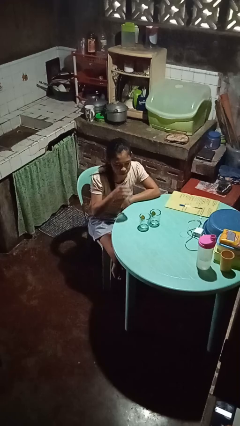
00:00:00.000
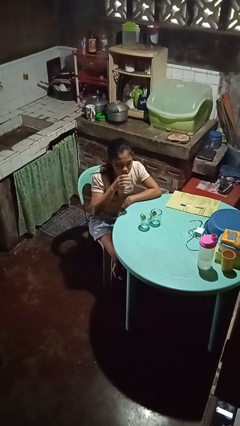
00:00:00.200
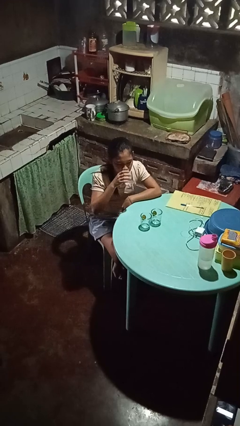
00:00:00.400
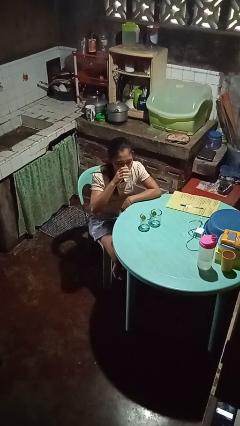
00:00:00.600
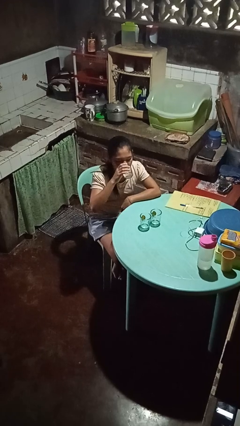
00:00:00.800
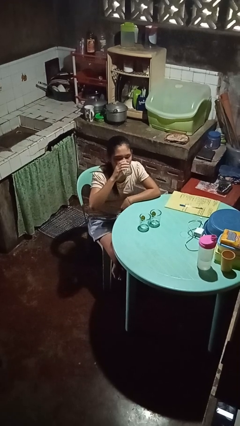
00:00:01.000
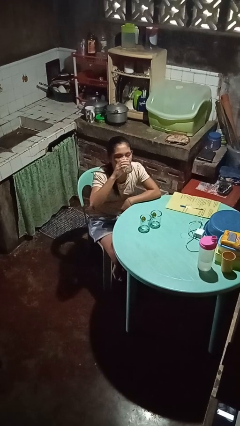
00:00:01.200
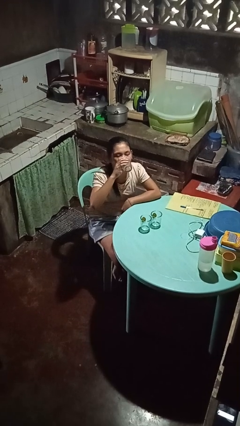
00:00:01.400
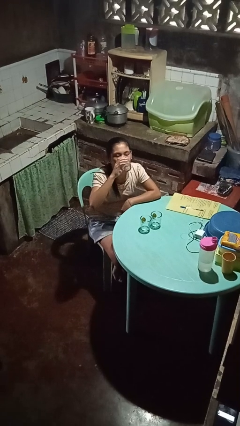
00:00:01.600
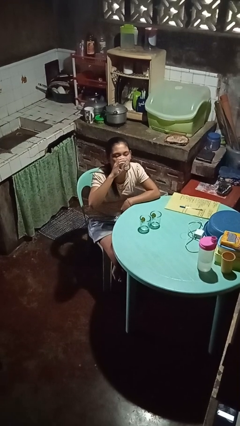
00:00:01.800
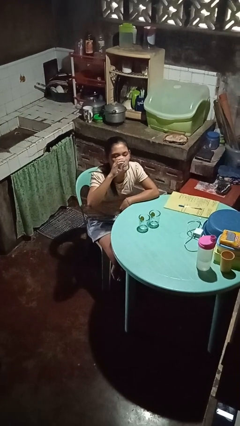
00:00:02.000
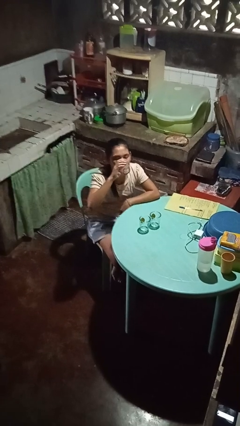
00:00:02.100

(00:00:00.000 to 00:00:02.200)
person drinks from shotglass

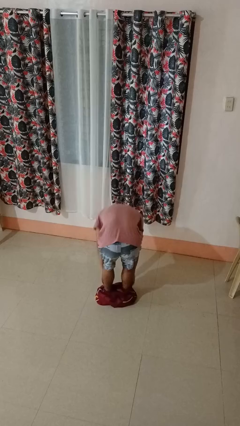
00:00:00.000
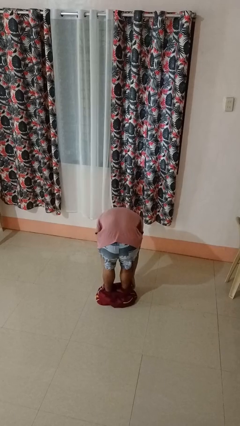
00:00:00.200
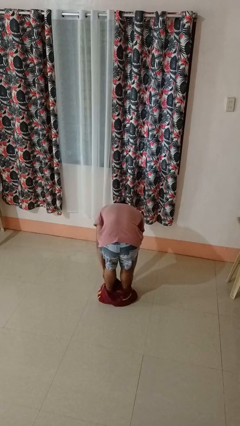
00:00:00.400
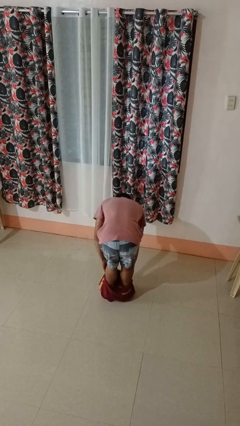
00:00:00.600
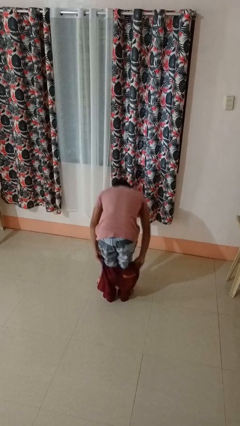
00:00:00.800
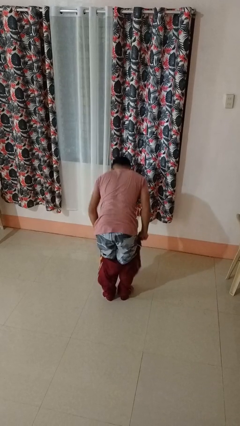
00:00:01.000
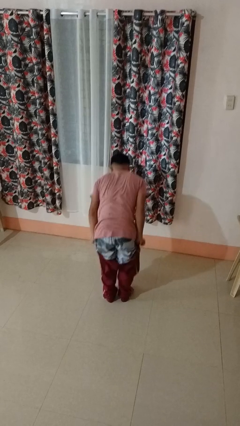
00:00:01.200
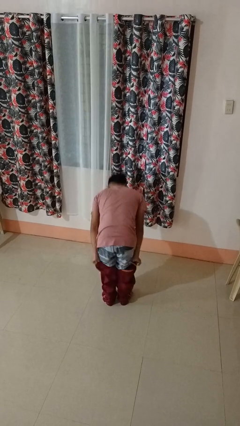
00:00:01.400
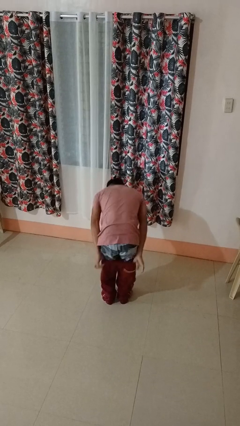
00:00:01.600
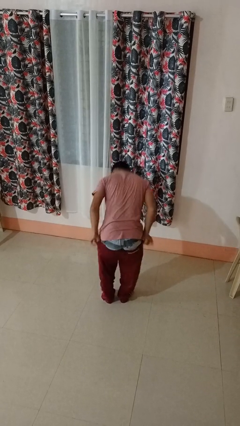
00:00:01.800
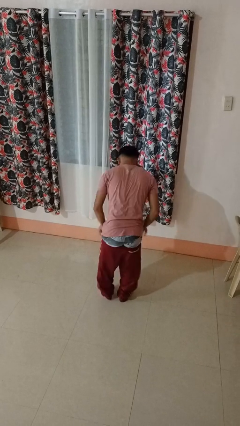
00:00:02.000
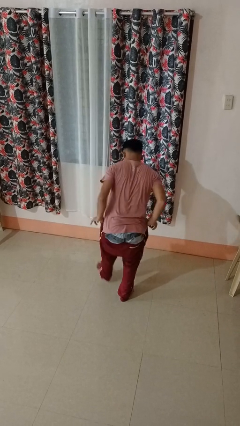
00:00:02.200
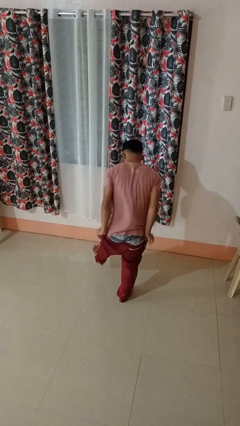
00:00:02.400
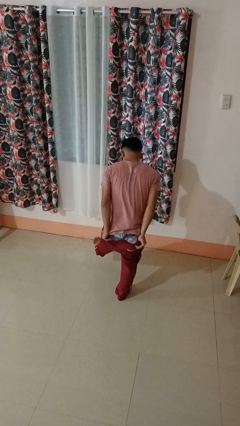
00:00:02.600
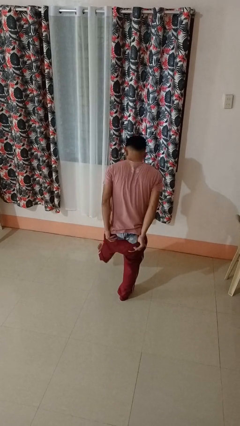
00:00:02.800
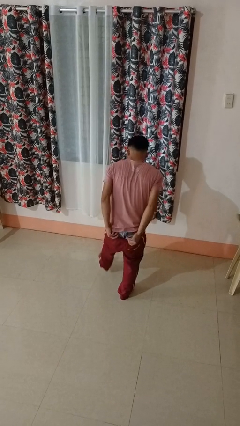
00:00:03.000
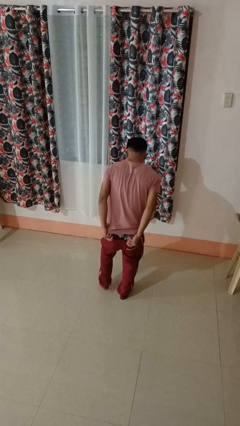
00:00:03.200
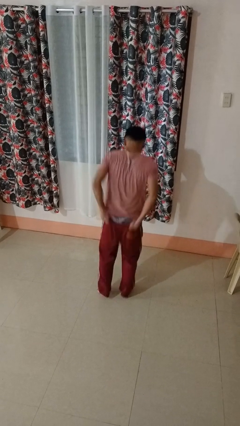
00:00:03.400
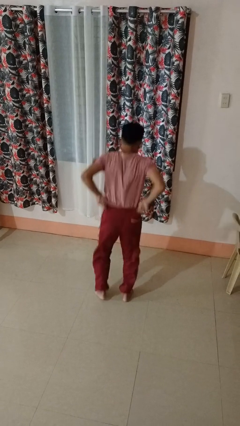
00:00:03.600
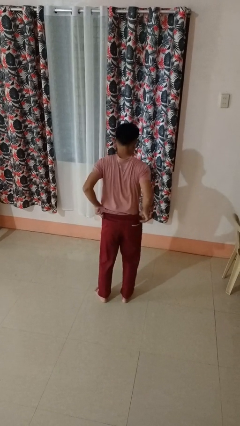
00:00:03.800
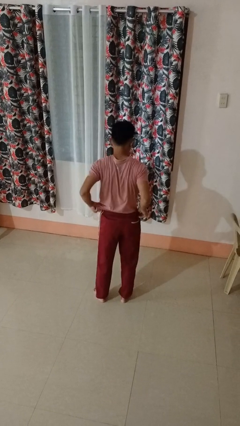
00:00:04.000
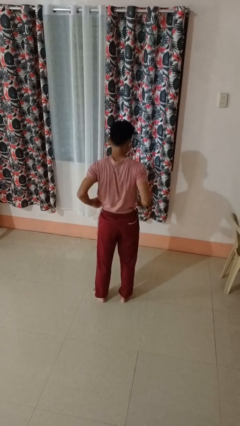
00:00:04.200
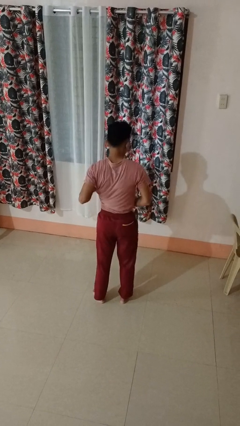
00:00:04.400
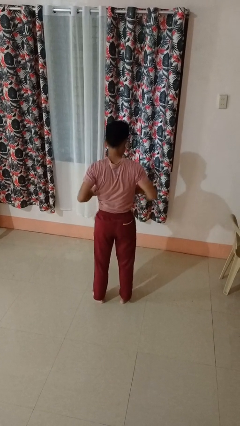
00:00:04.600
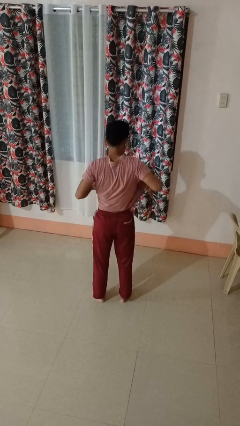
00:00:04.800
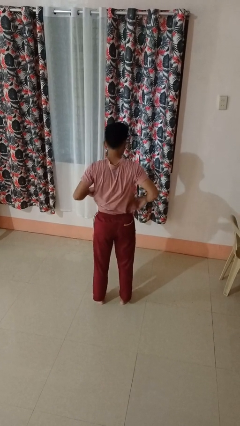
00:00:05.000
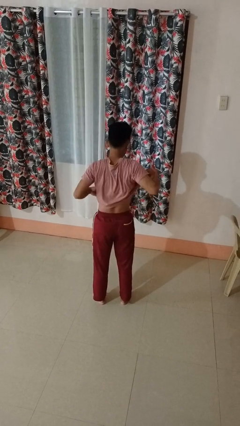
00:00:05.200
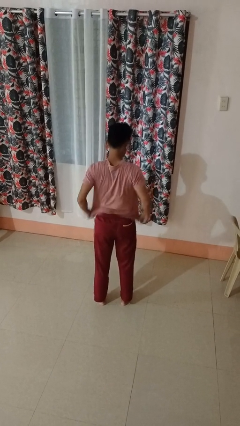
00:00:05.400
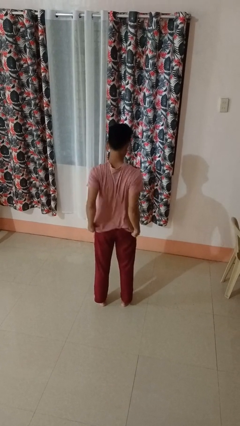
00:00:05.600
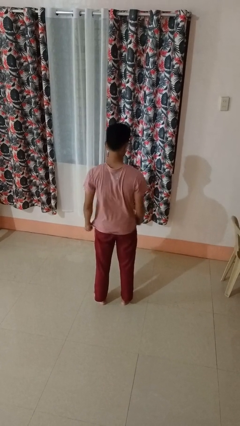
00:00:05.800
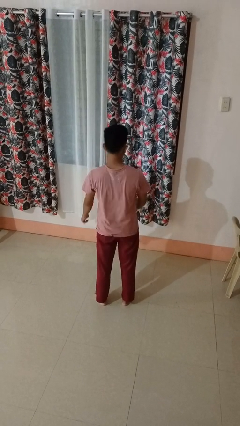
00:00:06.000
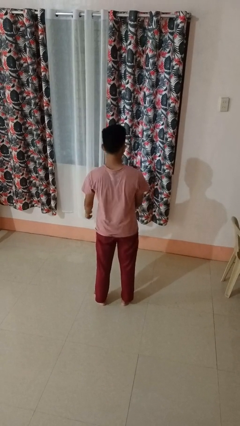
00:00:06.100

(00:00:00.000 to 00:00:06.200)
person puts on pants

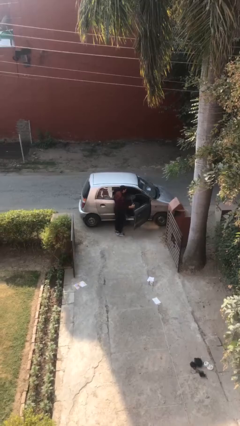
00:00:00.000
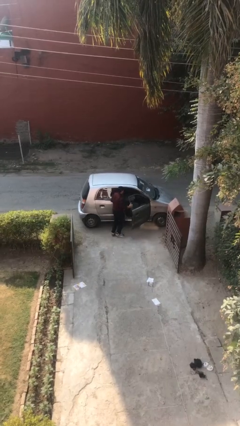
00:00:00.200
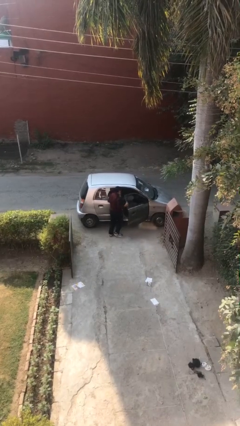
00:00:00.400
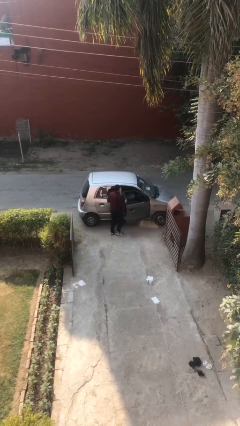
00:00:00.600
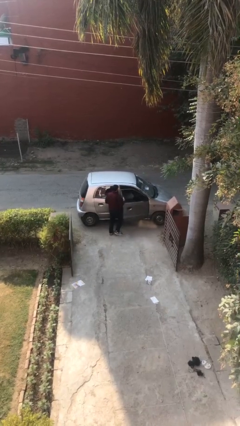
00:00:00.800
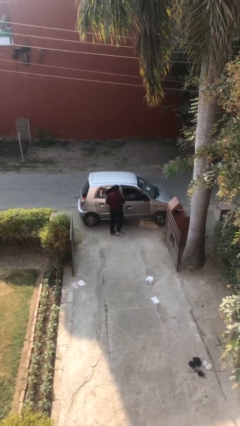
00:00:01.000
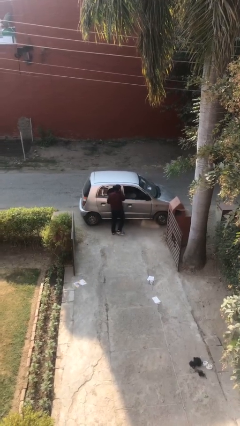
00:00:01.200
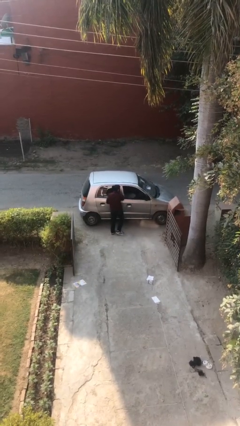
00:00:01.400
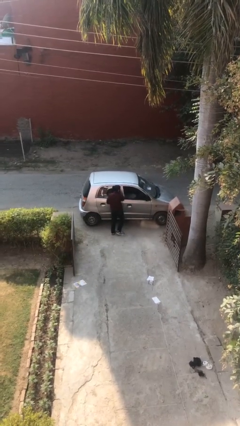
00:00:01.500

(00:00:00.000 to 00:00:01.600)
person closes car door

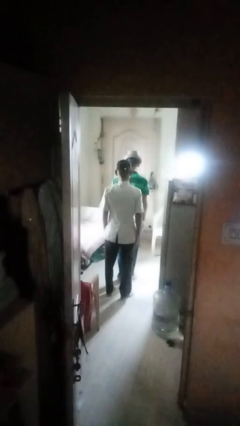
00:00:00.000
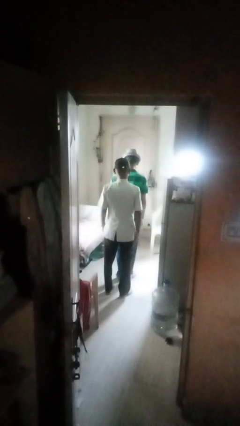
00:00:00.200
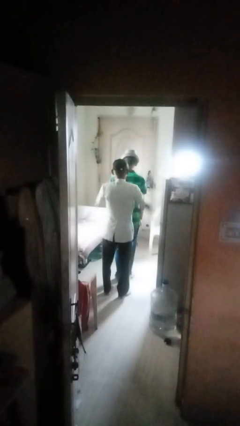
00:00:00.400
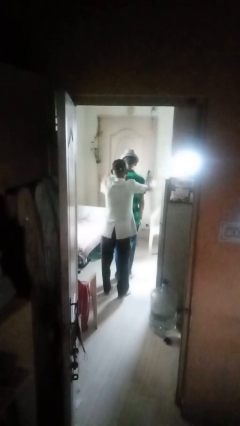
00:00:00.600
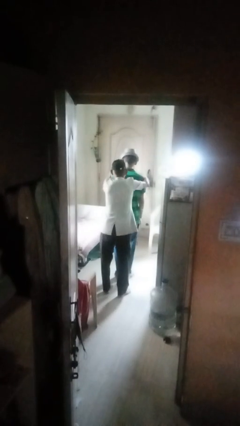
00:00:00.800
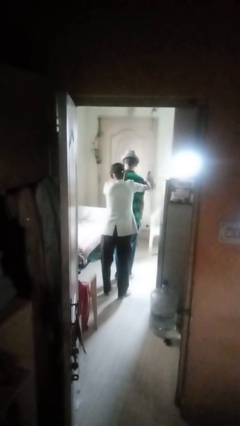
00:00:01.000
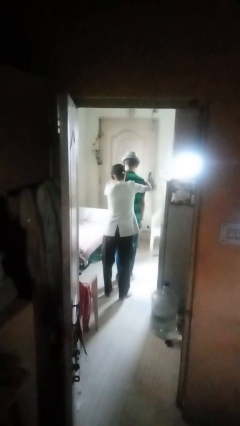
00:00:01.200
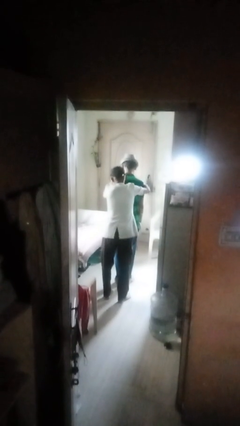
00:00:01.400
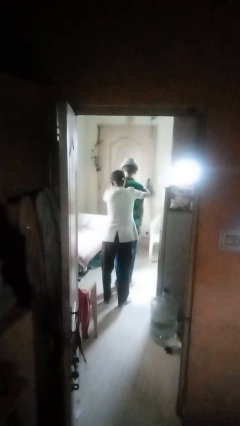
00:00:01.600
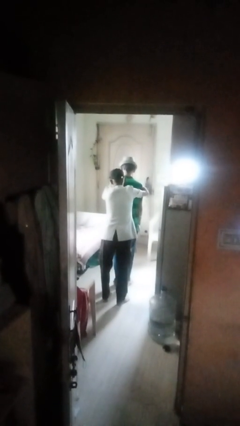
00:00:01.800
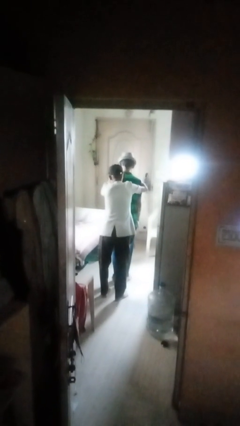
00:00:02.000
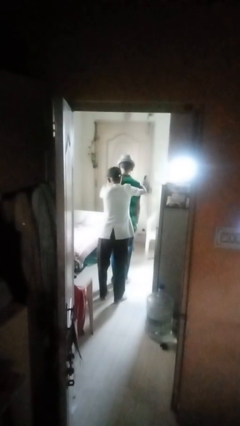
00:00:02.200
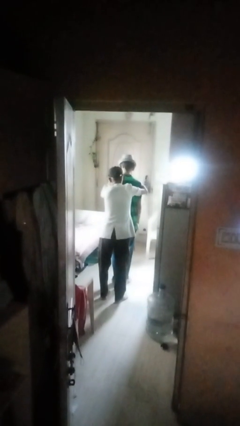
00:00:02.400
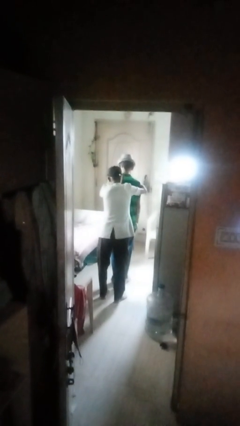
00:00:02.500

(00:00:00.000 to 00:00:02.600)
person hugs person from behind

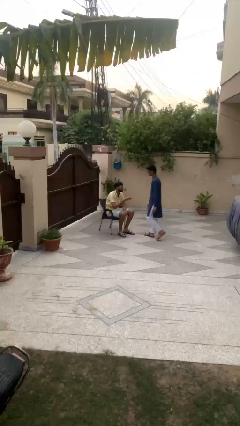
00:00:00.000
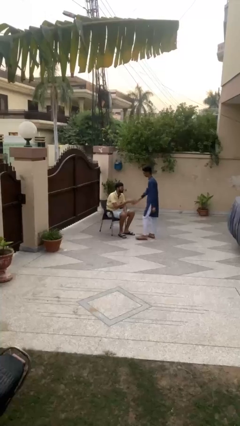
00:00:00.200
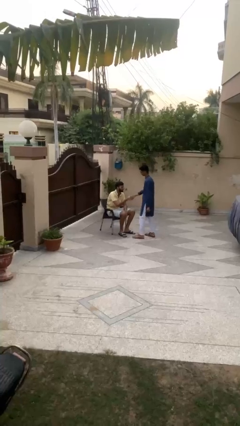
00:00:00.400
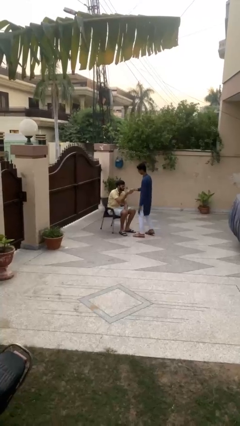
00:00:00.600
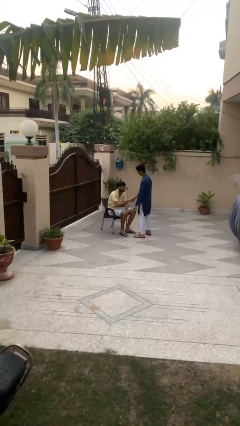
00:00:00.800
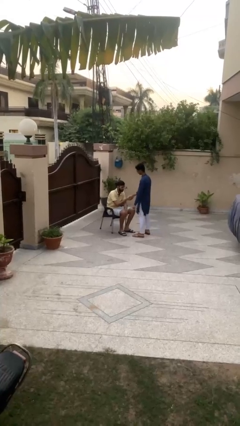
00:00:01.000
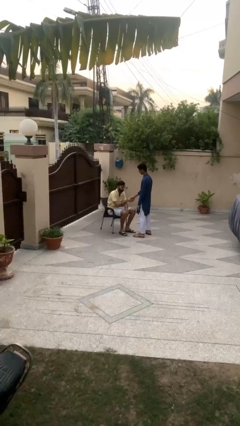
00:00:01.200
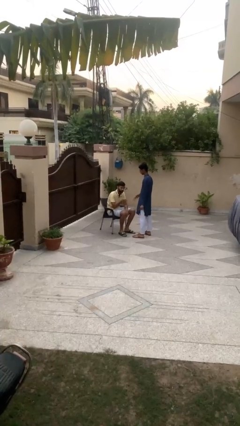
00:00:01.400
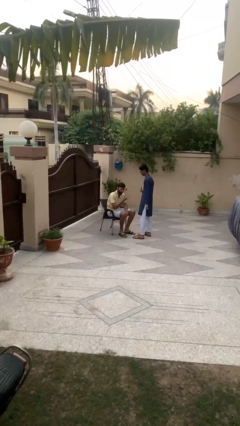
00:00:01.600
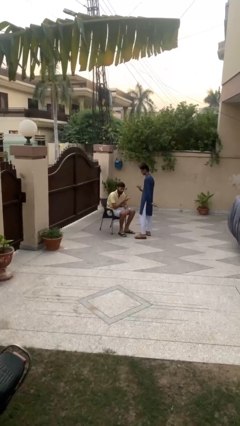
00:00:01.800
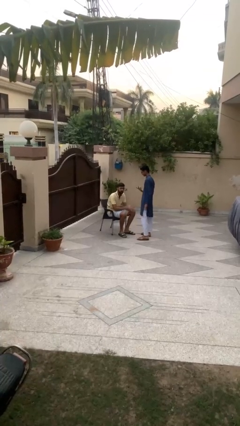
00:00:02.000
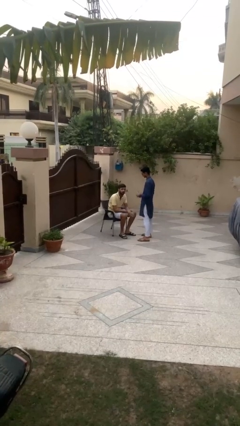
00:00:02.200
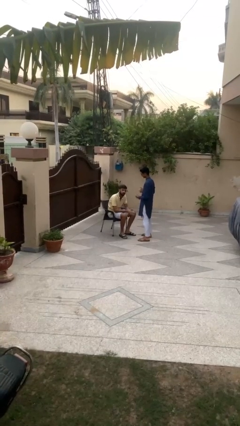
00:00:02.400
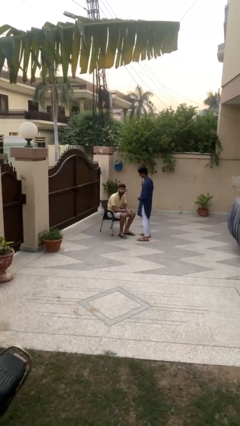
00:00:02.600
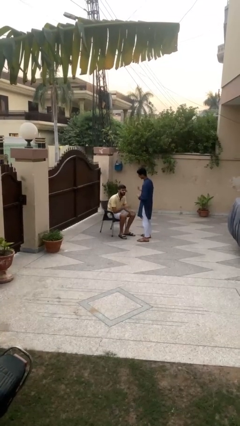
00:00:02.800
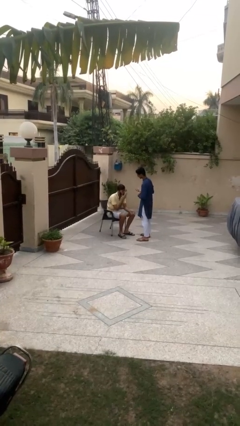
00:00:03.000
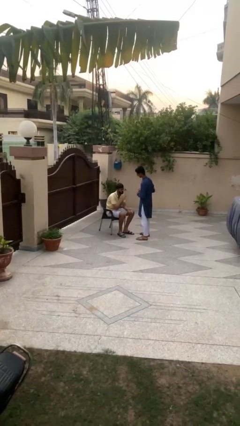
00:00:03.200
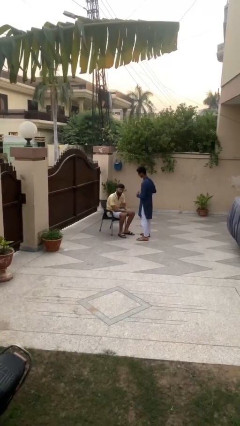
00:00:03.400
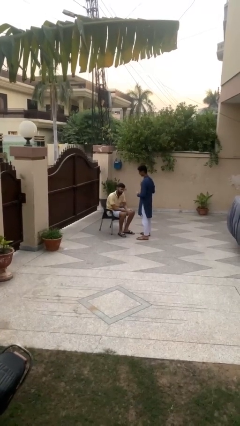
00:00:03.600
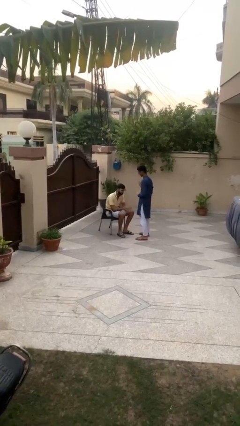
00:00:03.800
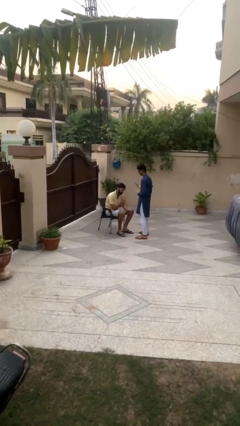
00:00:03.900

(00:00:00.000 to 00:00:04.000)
person shakes hand

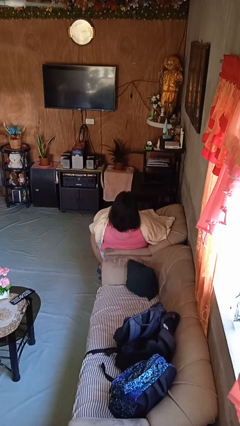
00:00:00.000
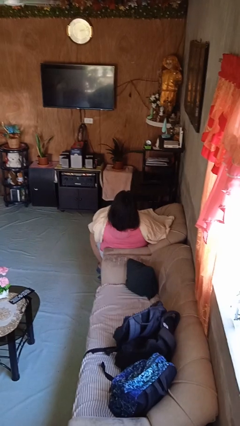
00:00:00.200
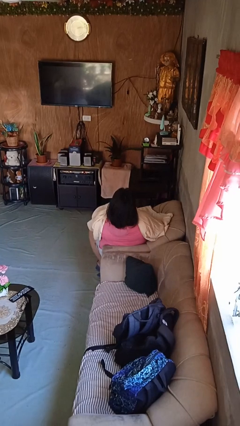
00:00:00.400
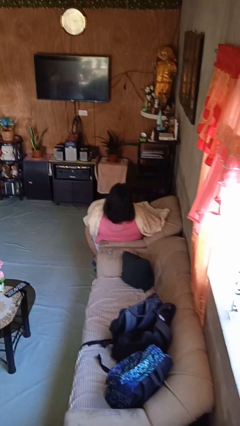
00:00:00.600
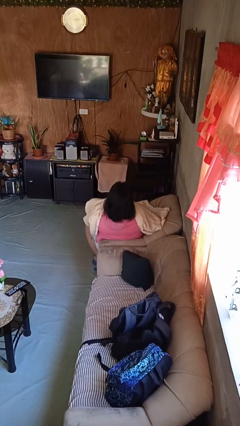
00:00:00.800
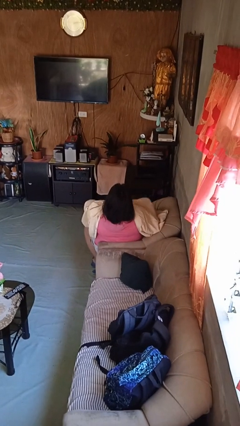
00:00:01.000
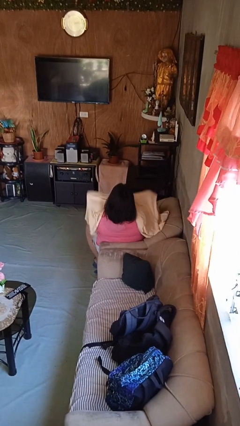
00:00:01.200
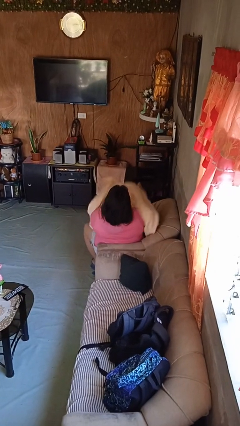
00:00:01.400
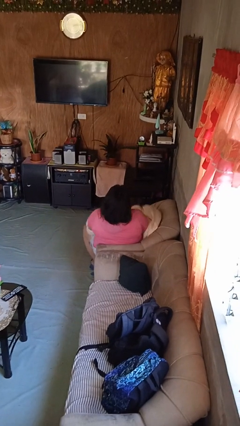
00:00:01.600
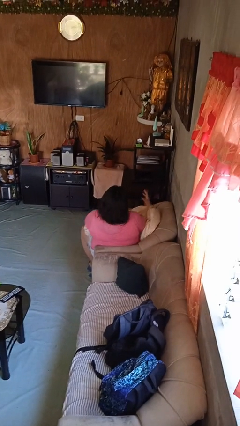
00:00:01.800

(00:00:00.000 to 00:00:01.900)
person uncovers with blanket